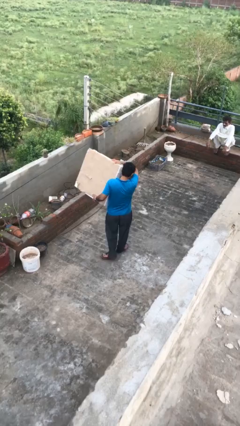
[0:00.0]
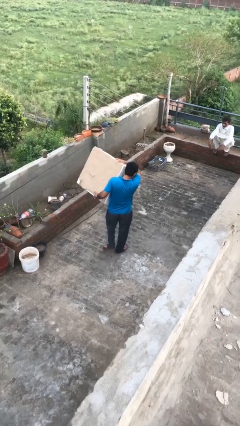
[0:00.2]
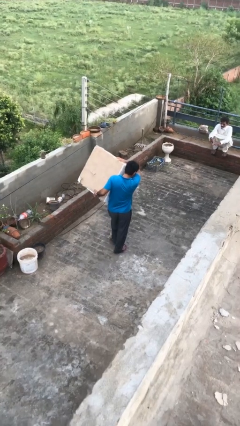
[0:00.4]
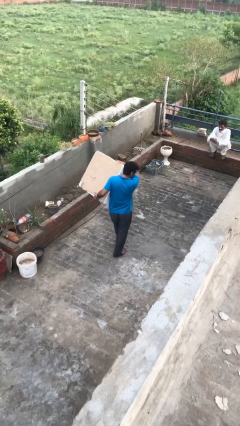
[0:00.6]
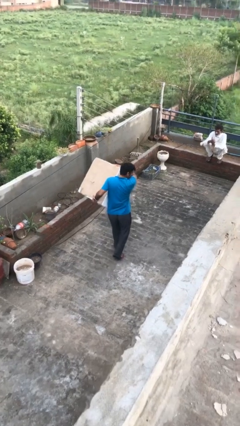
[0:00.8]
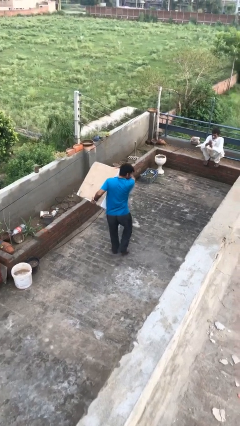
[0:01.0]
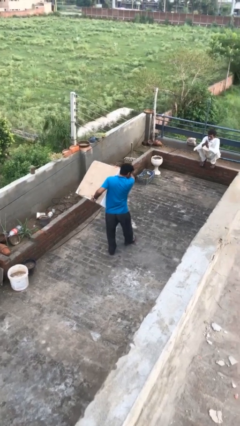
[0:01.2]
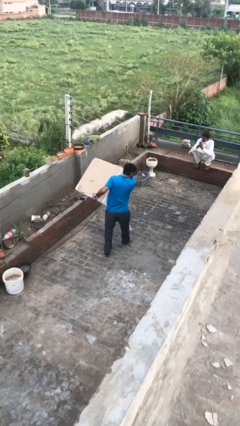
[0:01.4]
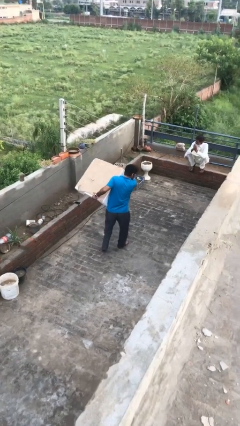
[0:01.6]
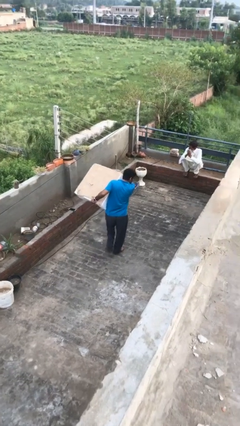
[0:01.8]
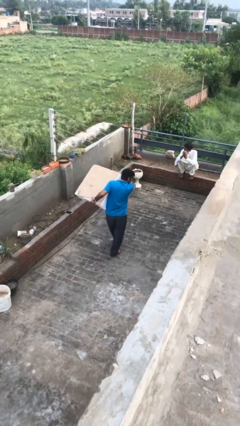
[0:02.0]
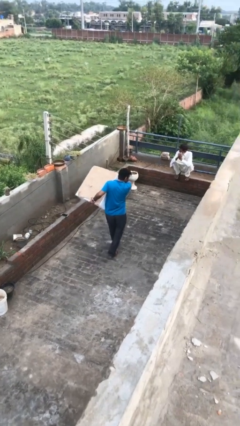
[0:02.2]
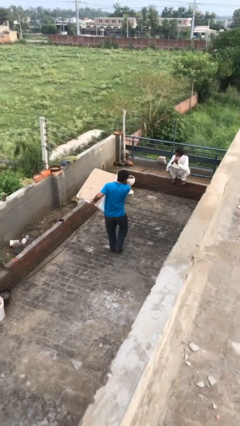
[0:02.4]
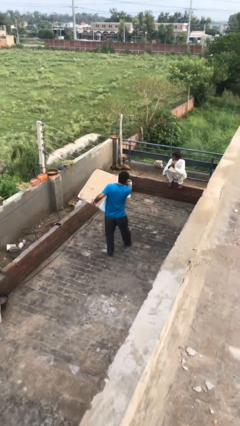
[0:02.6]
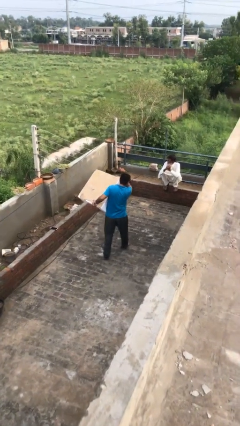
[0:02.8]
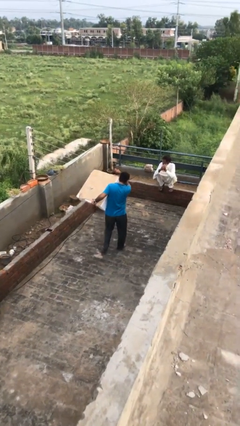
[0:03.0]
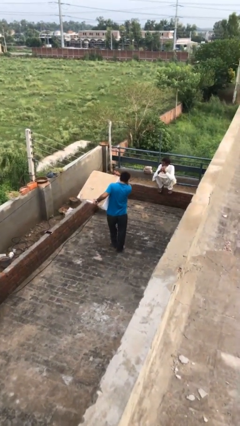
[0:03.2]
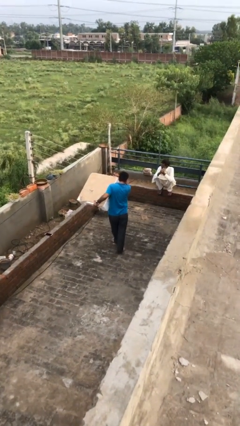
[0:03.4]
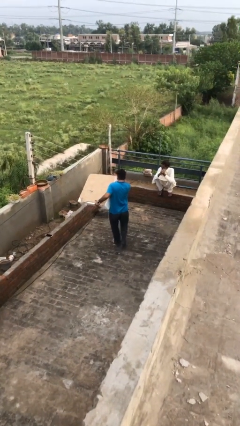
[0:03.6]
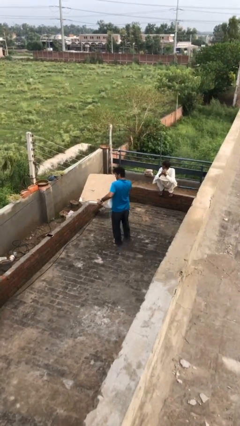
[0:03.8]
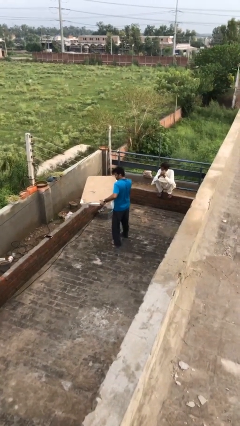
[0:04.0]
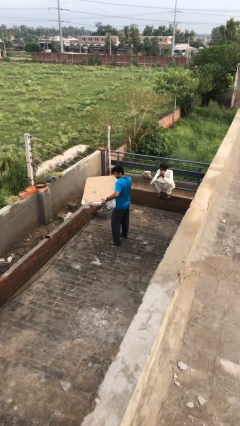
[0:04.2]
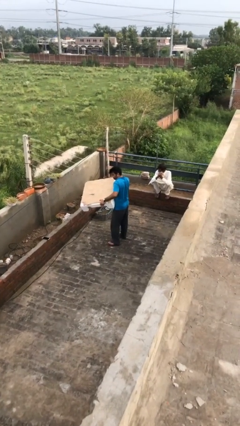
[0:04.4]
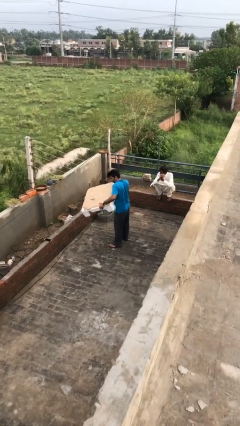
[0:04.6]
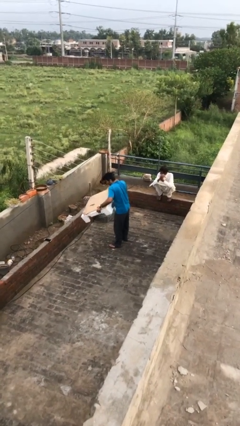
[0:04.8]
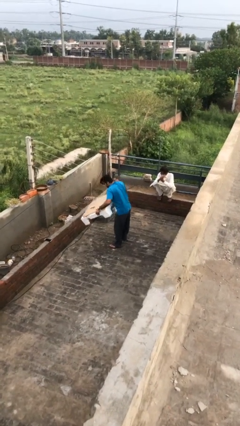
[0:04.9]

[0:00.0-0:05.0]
person carries heavy object

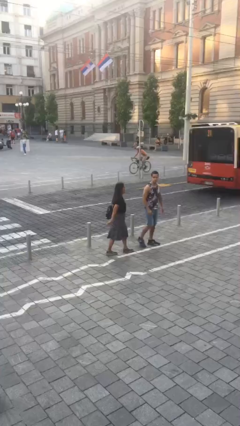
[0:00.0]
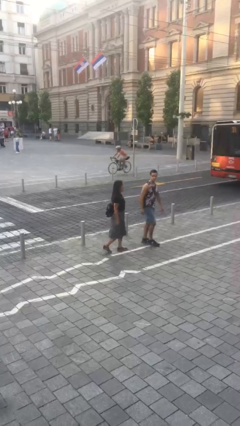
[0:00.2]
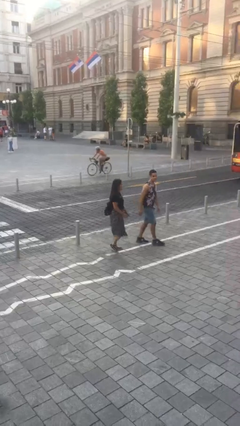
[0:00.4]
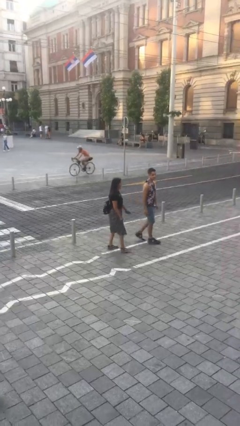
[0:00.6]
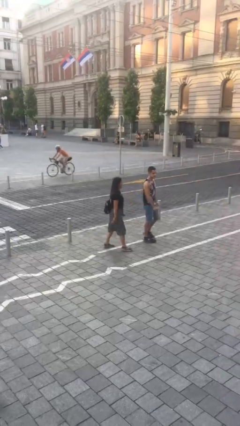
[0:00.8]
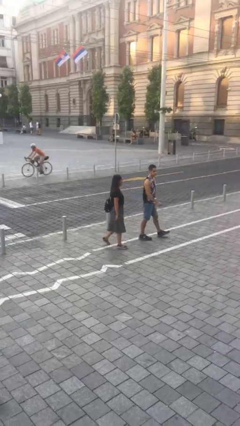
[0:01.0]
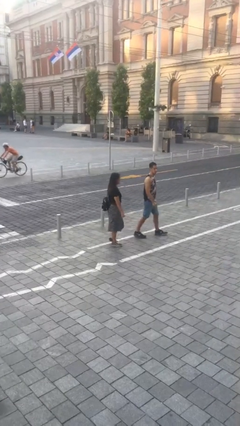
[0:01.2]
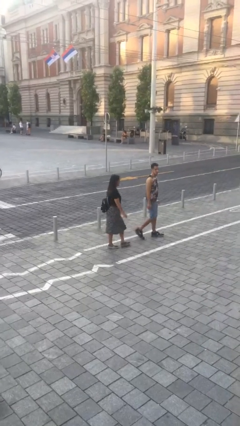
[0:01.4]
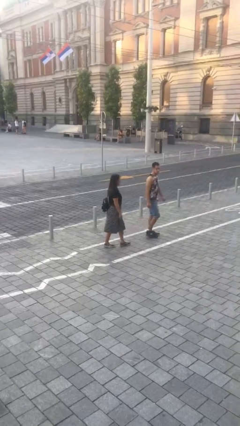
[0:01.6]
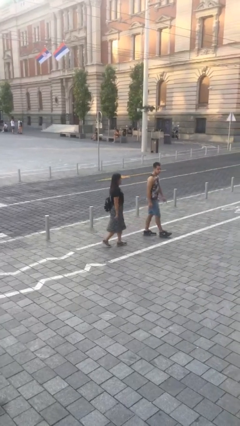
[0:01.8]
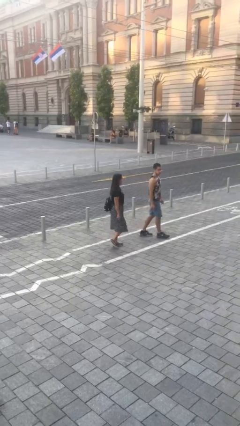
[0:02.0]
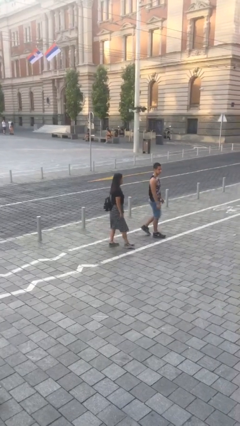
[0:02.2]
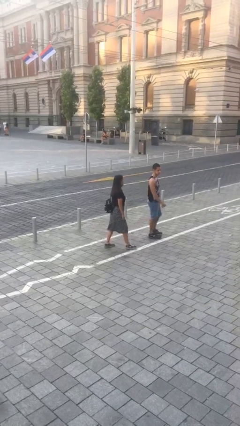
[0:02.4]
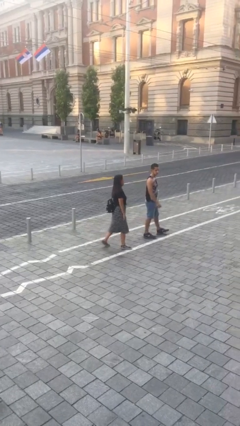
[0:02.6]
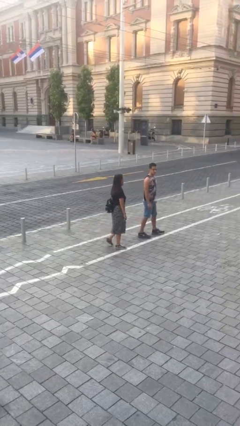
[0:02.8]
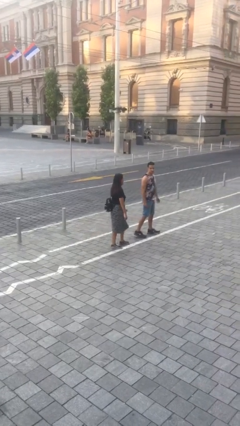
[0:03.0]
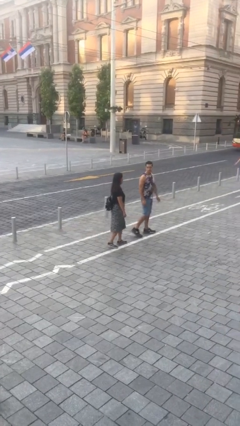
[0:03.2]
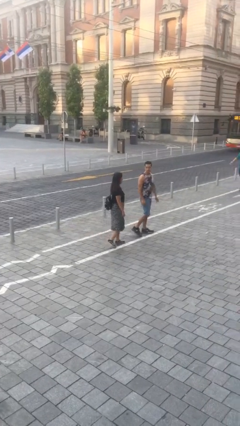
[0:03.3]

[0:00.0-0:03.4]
person talks to person

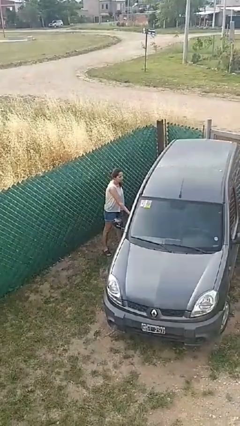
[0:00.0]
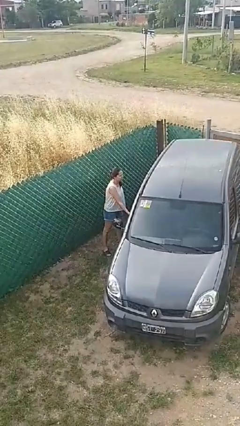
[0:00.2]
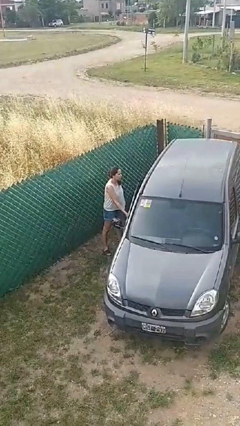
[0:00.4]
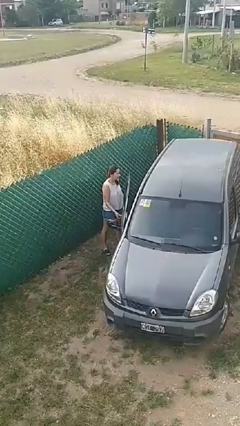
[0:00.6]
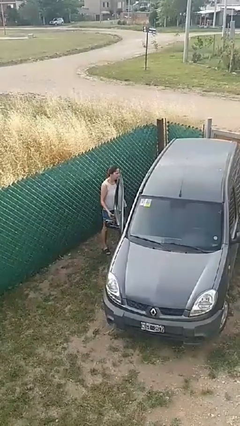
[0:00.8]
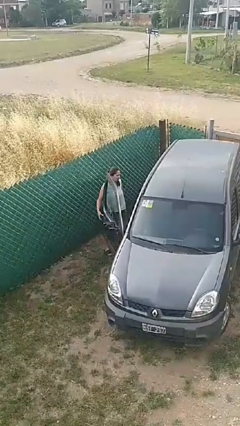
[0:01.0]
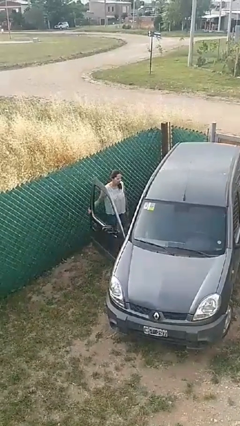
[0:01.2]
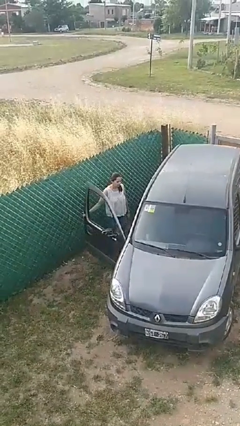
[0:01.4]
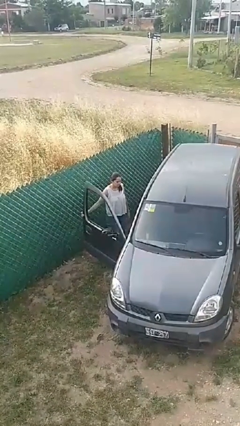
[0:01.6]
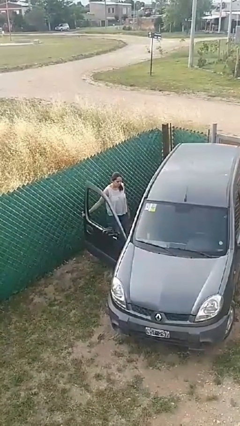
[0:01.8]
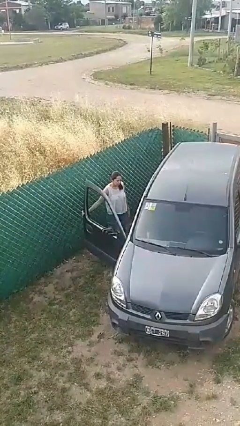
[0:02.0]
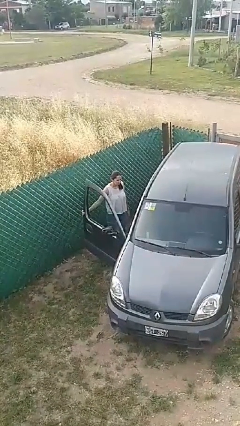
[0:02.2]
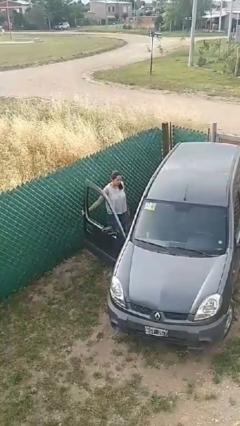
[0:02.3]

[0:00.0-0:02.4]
person opens car door

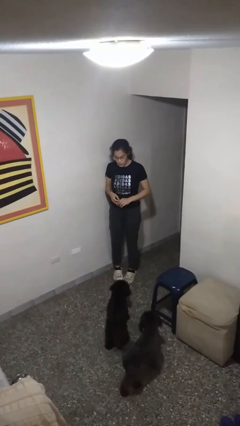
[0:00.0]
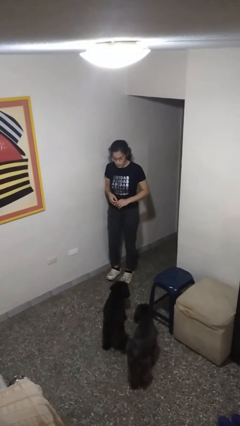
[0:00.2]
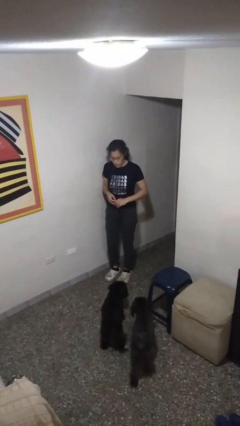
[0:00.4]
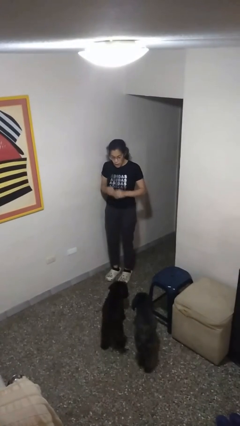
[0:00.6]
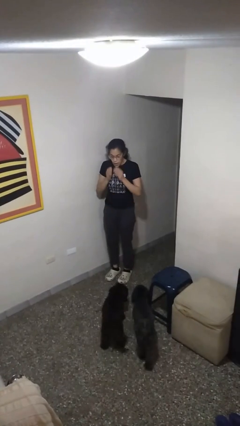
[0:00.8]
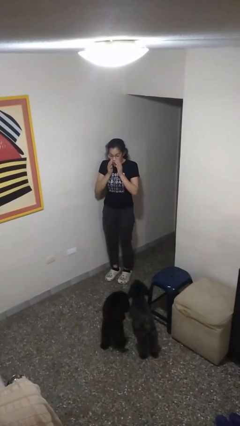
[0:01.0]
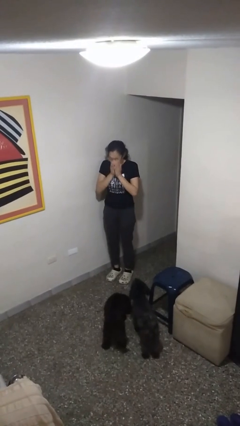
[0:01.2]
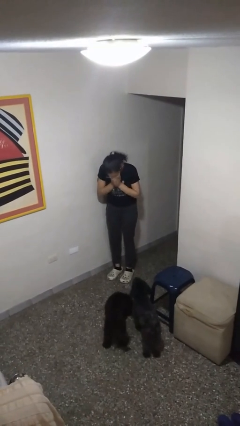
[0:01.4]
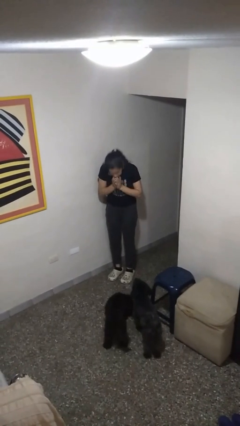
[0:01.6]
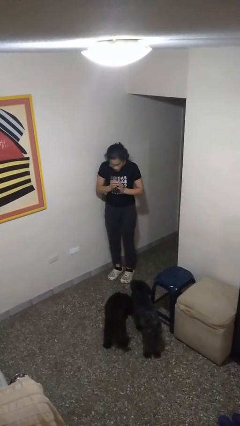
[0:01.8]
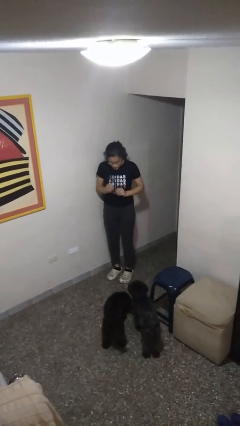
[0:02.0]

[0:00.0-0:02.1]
person sneezes into hand

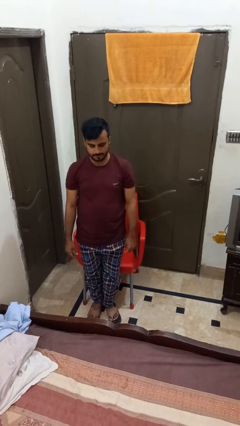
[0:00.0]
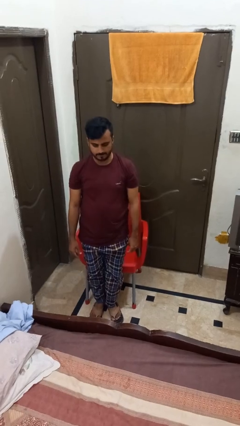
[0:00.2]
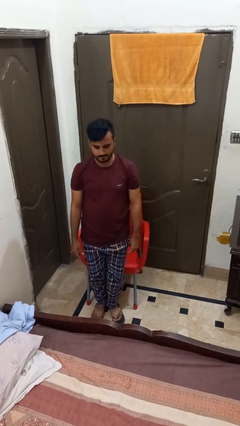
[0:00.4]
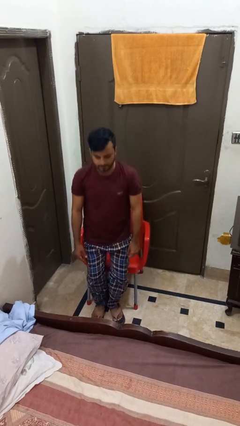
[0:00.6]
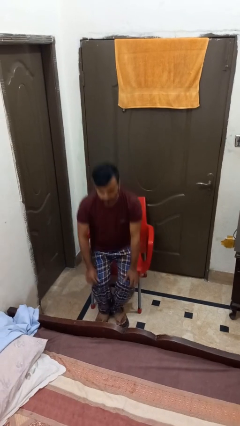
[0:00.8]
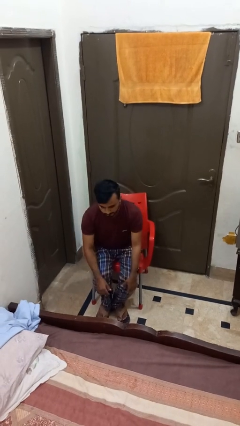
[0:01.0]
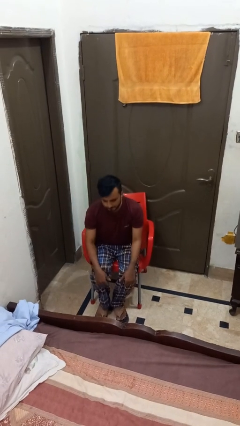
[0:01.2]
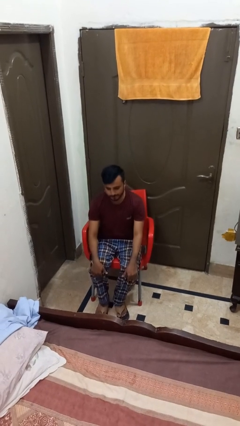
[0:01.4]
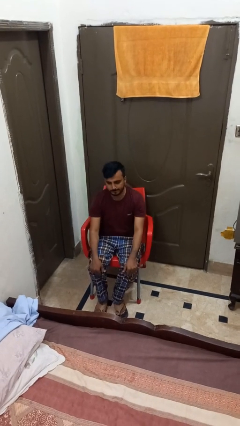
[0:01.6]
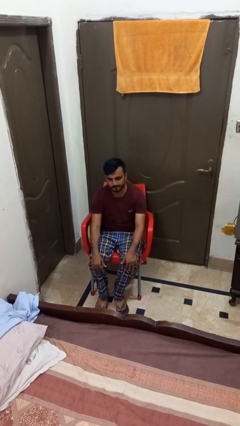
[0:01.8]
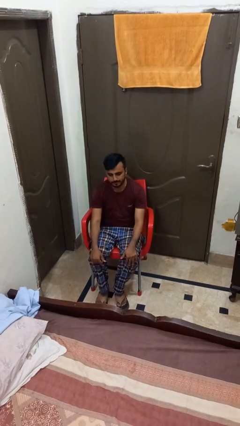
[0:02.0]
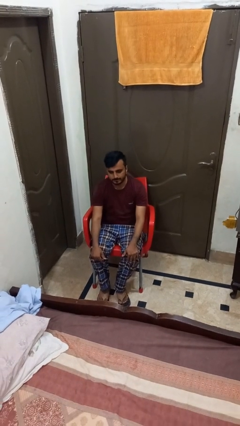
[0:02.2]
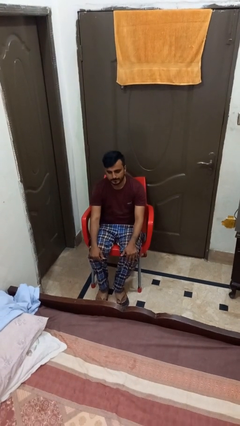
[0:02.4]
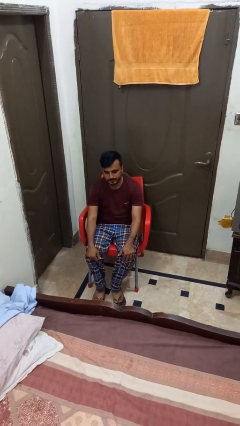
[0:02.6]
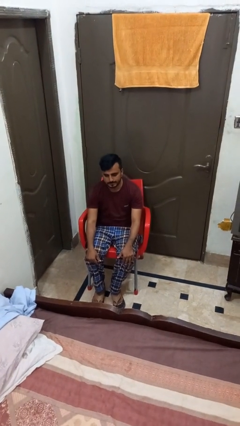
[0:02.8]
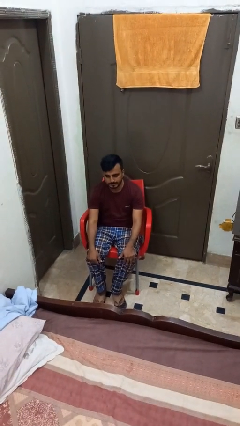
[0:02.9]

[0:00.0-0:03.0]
person sits down

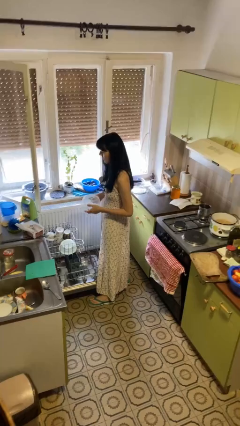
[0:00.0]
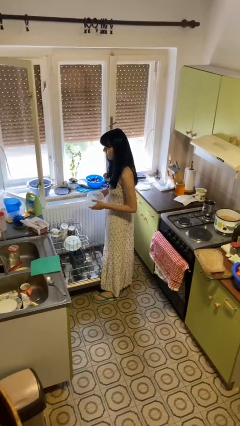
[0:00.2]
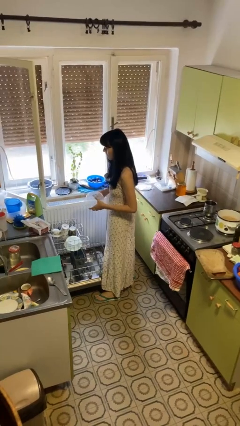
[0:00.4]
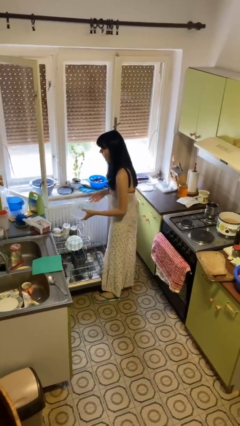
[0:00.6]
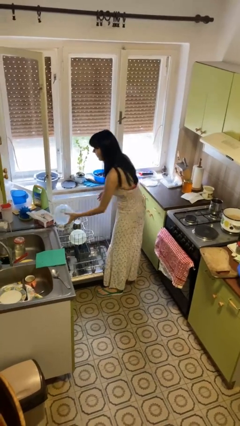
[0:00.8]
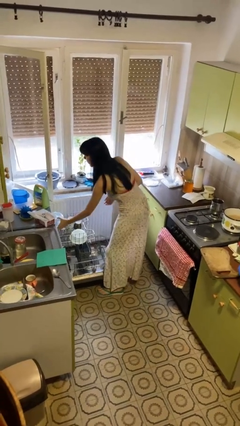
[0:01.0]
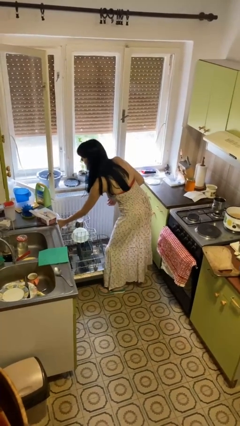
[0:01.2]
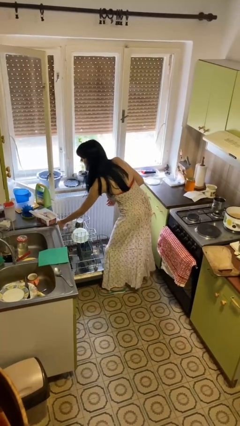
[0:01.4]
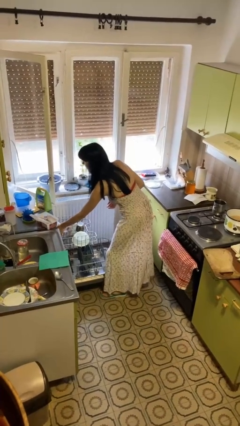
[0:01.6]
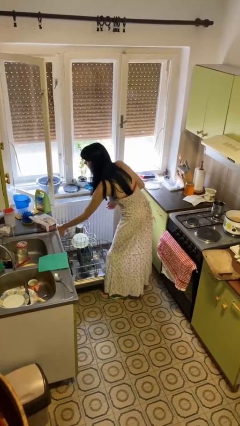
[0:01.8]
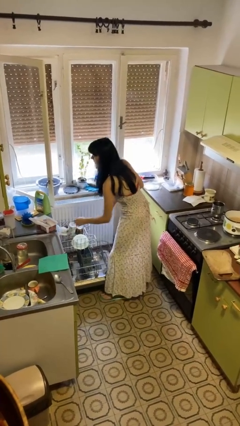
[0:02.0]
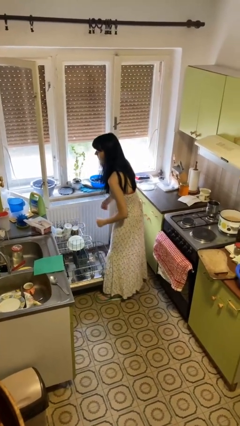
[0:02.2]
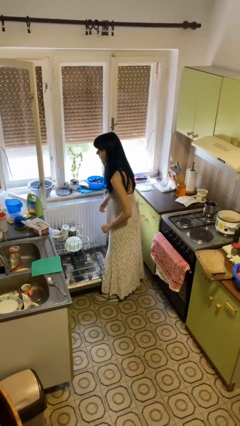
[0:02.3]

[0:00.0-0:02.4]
person loads dishwasher
